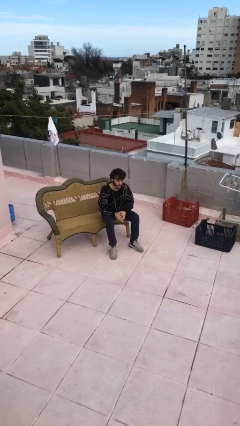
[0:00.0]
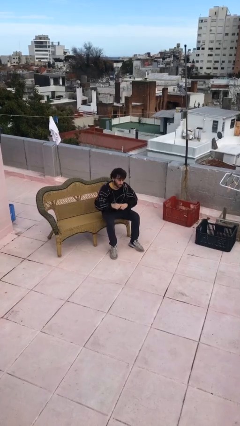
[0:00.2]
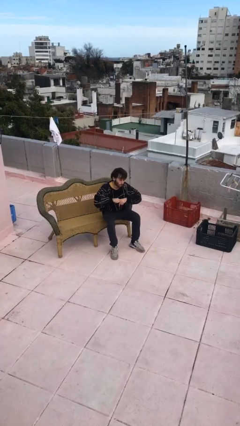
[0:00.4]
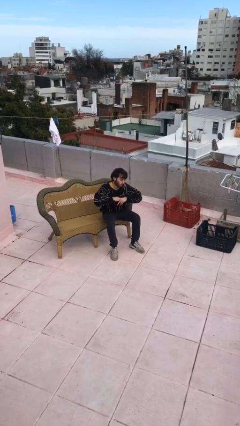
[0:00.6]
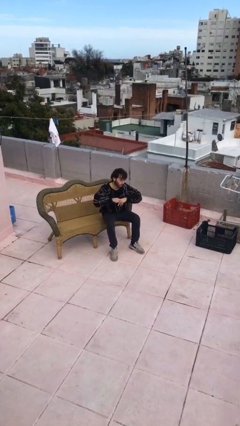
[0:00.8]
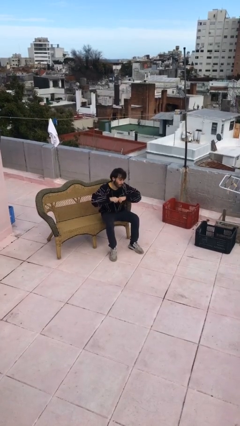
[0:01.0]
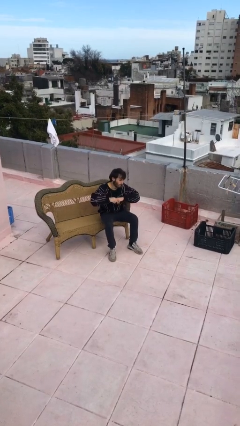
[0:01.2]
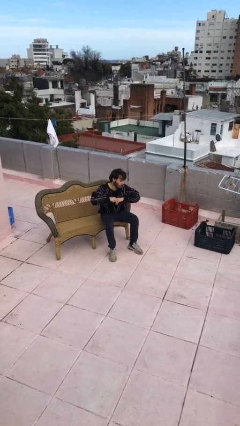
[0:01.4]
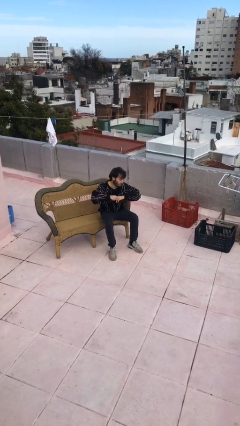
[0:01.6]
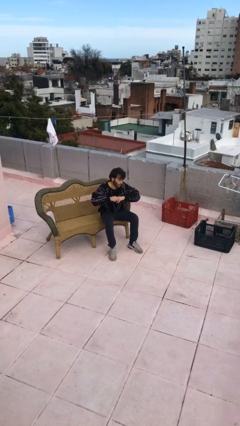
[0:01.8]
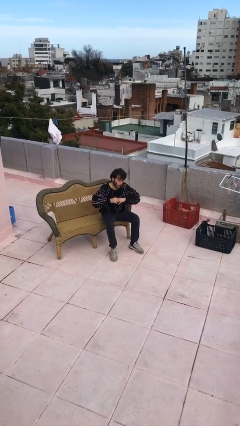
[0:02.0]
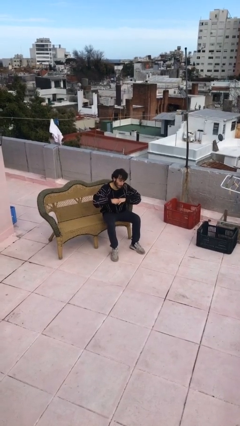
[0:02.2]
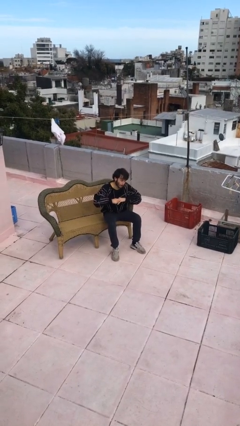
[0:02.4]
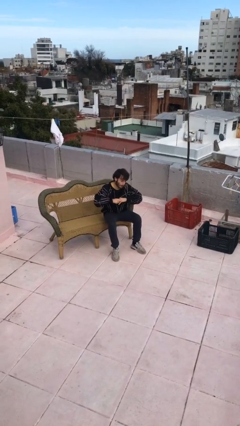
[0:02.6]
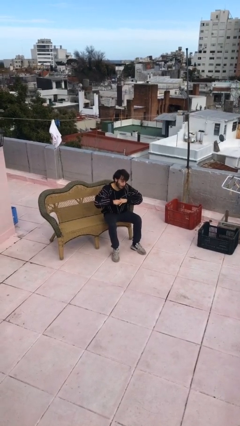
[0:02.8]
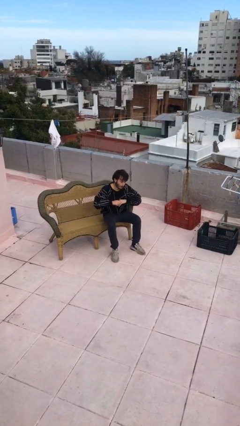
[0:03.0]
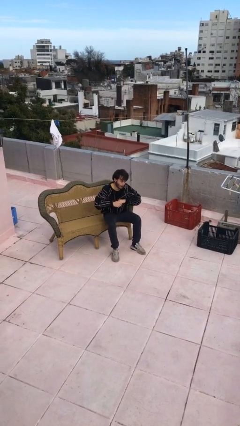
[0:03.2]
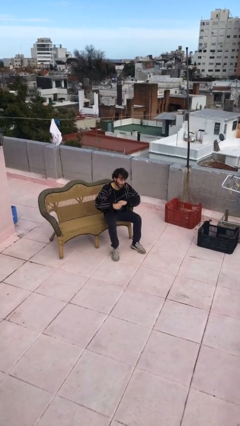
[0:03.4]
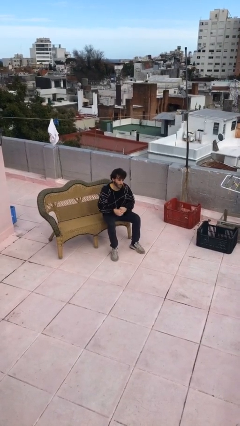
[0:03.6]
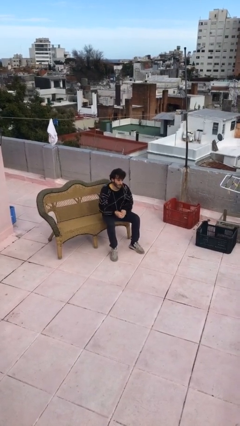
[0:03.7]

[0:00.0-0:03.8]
person cracks knuckles

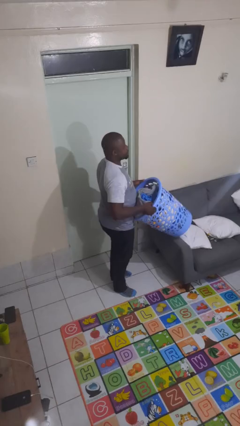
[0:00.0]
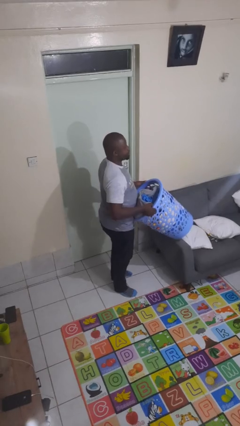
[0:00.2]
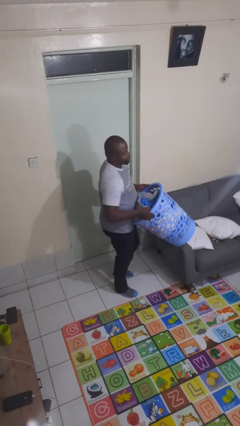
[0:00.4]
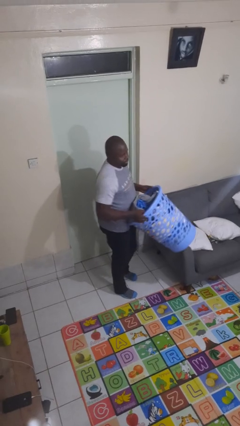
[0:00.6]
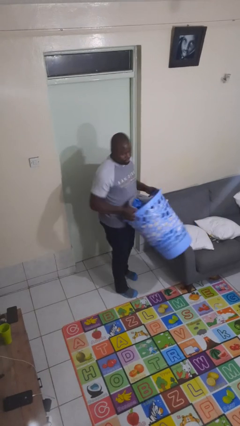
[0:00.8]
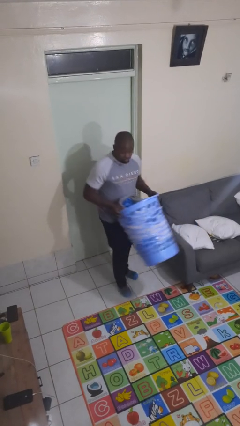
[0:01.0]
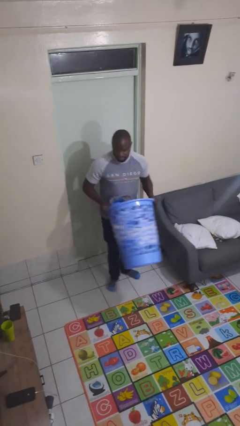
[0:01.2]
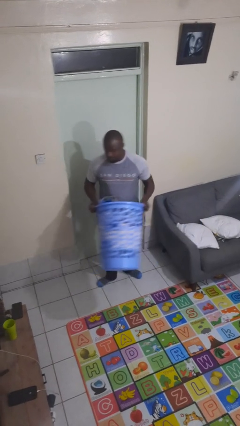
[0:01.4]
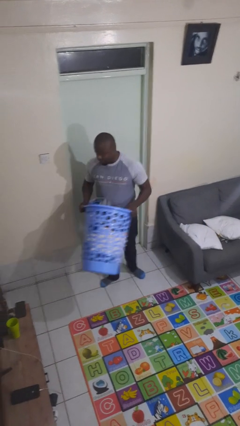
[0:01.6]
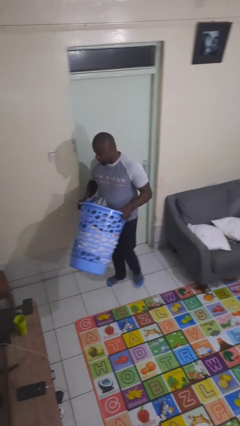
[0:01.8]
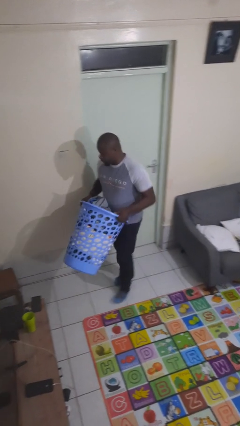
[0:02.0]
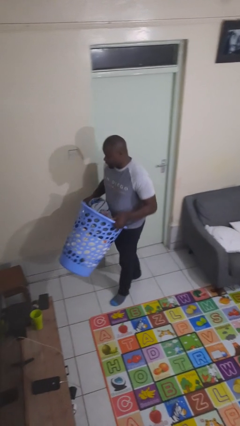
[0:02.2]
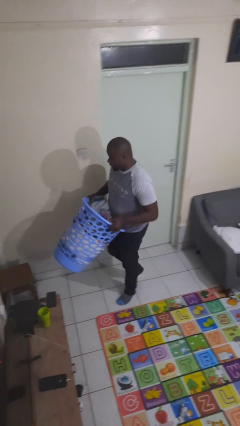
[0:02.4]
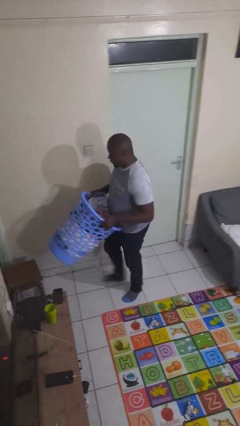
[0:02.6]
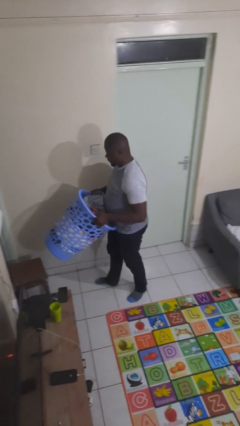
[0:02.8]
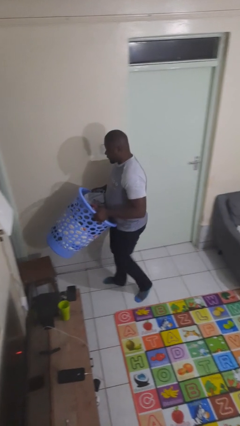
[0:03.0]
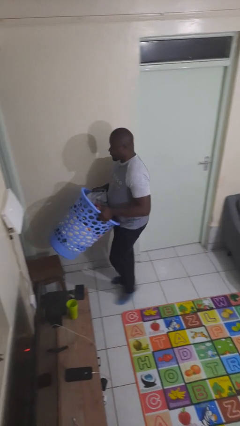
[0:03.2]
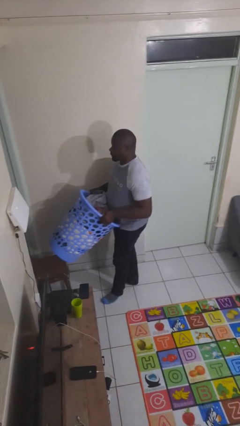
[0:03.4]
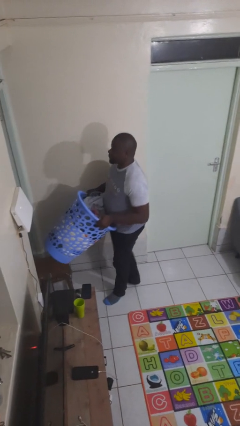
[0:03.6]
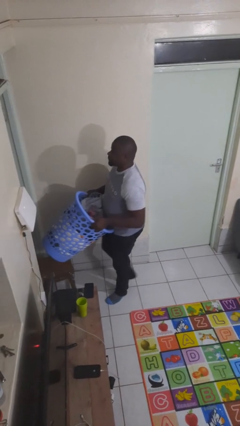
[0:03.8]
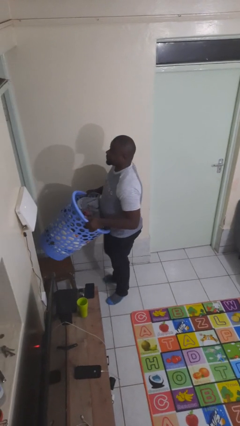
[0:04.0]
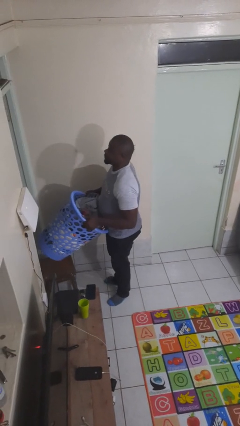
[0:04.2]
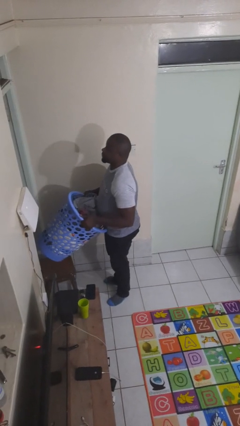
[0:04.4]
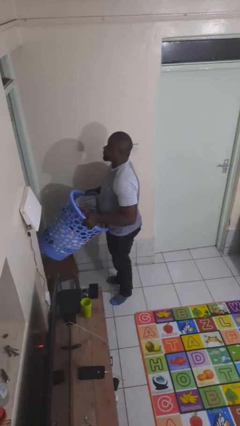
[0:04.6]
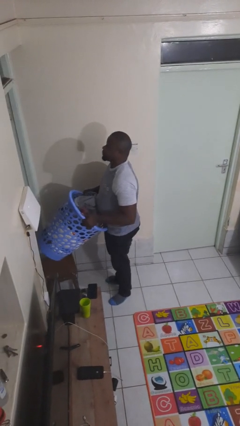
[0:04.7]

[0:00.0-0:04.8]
person carries laundry basket

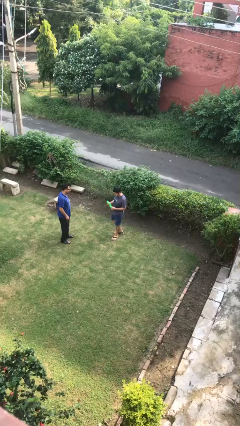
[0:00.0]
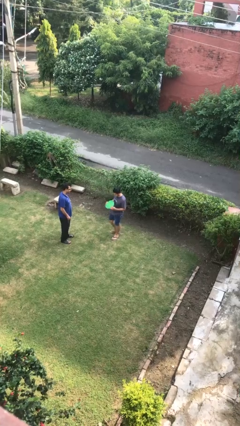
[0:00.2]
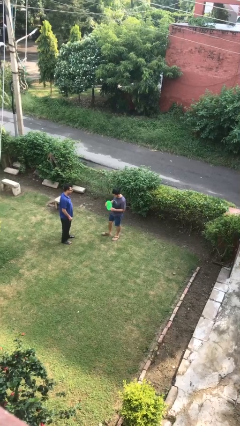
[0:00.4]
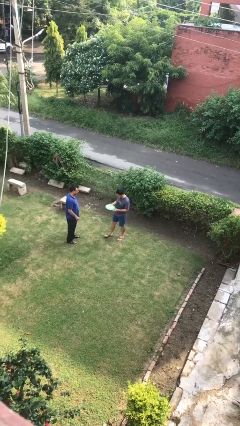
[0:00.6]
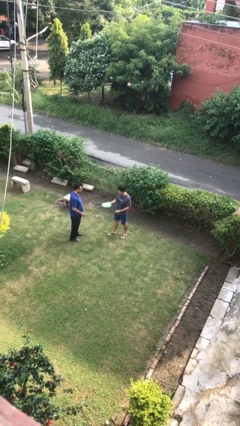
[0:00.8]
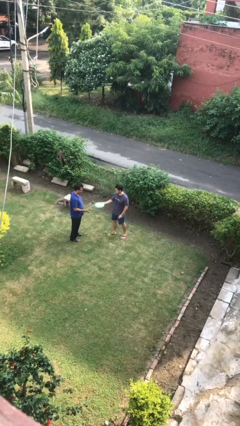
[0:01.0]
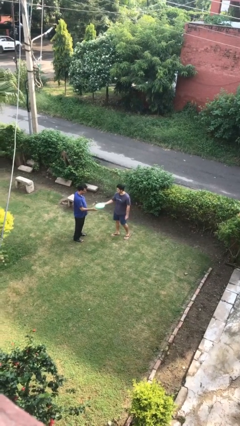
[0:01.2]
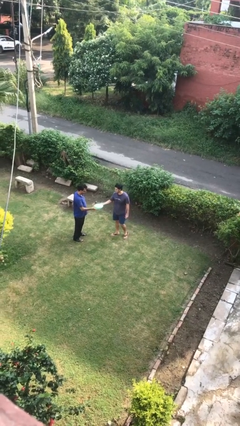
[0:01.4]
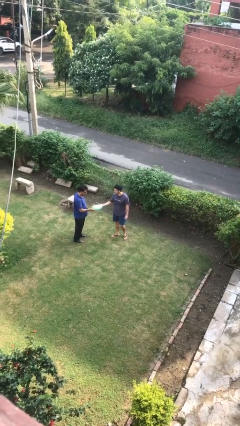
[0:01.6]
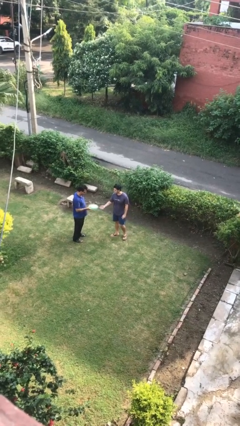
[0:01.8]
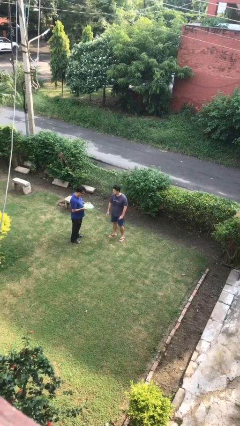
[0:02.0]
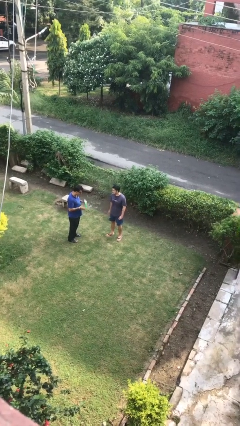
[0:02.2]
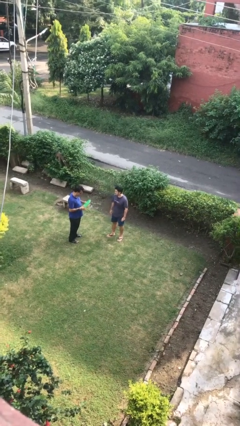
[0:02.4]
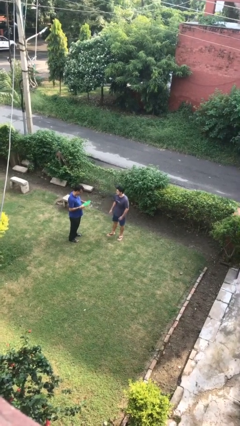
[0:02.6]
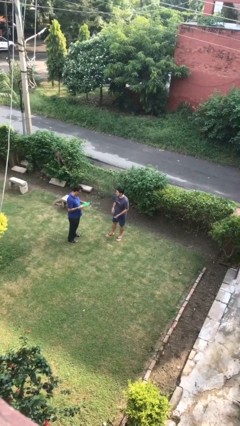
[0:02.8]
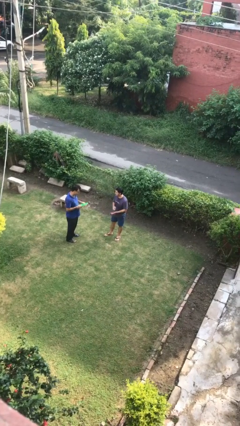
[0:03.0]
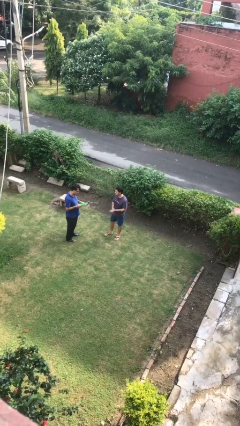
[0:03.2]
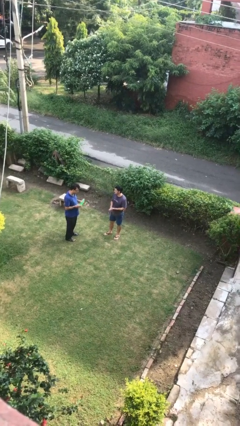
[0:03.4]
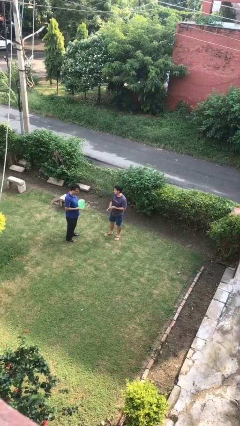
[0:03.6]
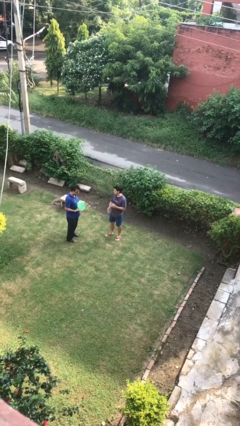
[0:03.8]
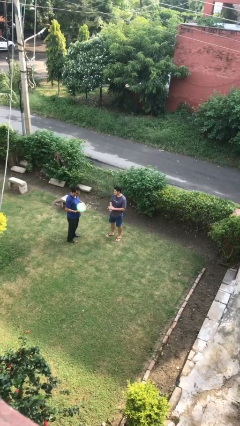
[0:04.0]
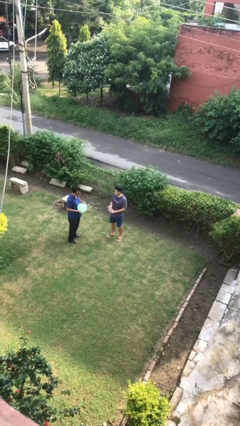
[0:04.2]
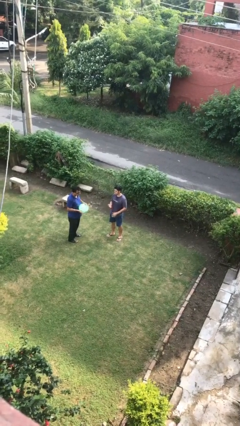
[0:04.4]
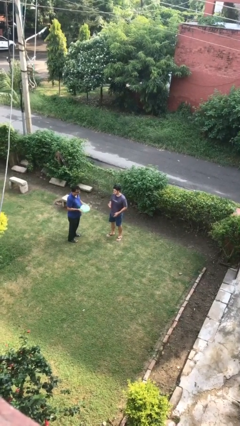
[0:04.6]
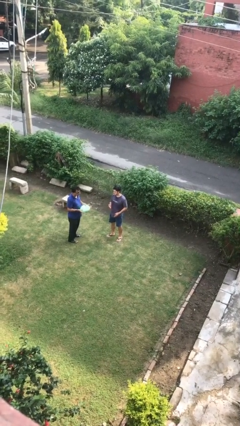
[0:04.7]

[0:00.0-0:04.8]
person transfers object to person

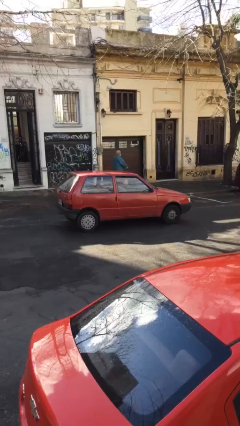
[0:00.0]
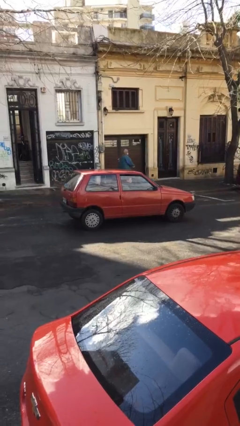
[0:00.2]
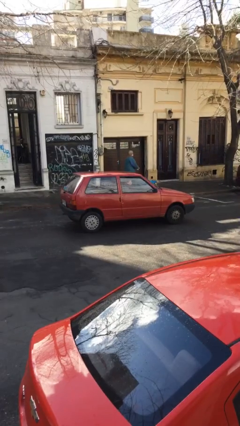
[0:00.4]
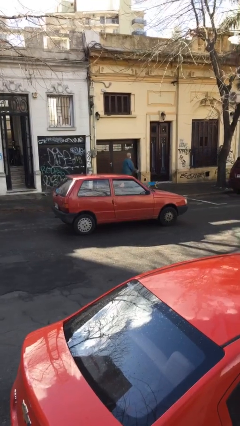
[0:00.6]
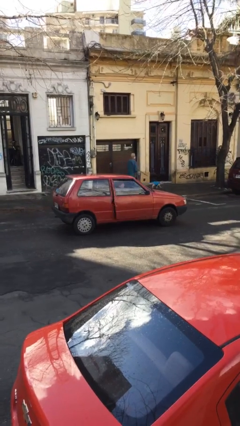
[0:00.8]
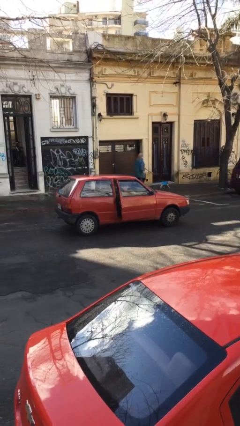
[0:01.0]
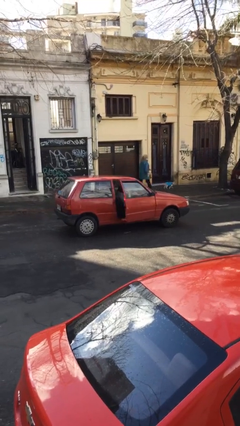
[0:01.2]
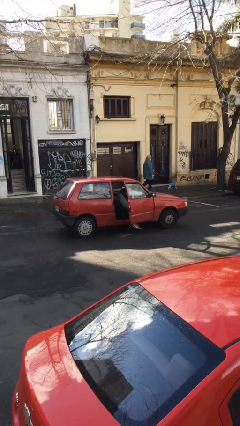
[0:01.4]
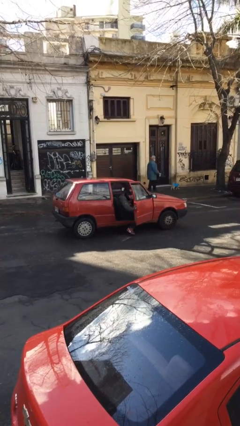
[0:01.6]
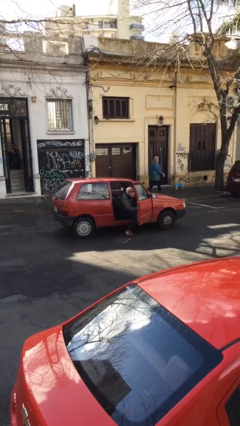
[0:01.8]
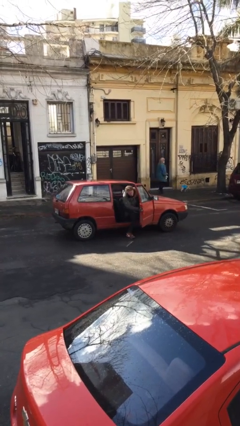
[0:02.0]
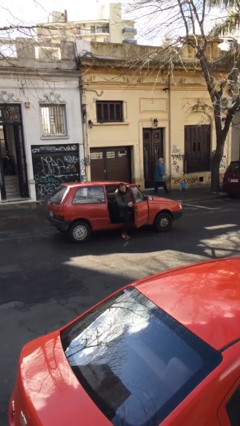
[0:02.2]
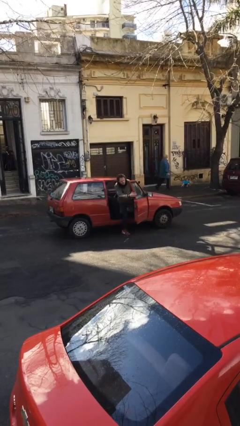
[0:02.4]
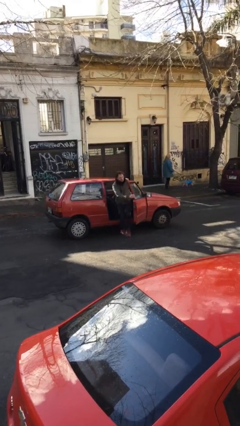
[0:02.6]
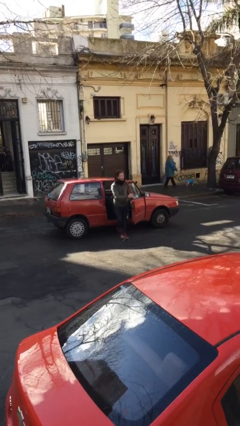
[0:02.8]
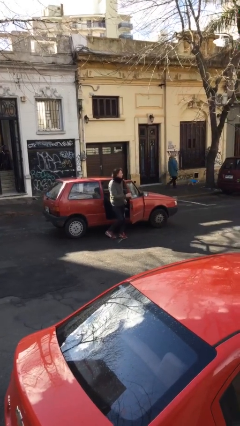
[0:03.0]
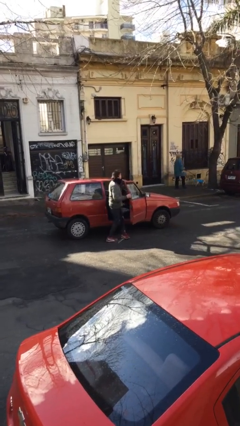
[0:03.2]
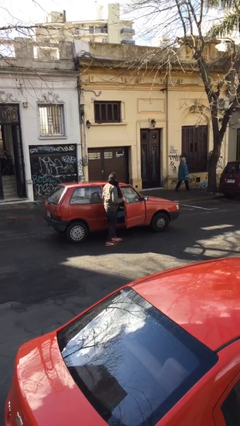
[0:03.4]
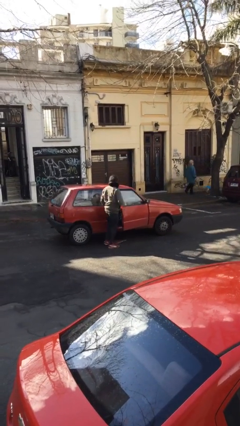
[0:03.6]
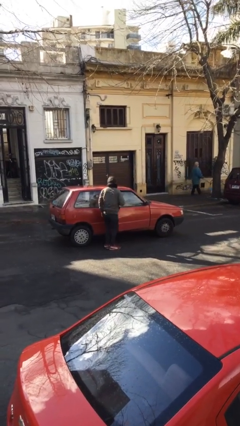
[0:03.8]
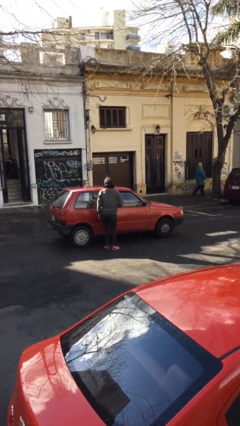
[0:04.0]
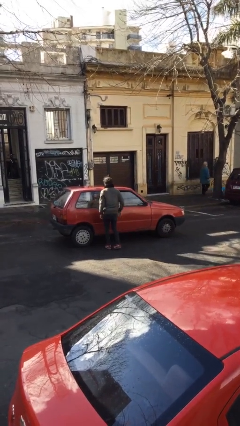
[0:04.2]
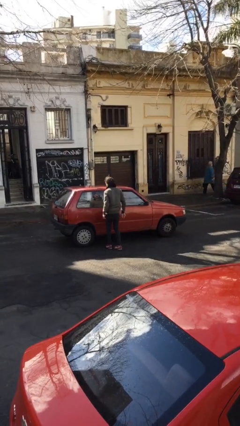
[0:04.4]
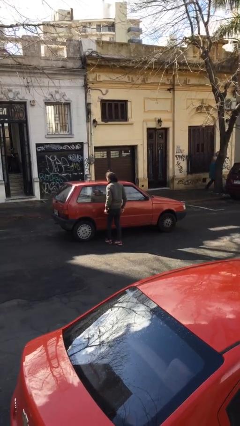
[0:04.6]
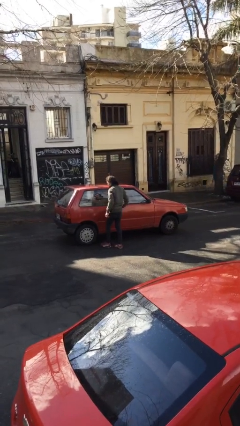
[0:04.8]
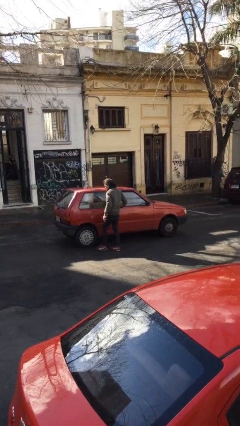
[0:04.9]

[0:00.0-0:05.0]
car drops off person
